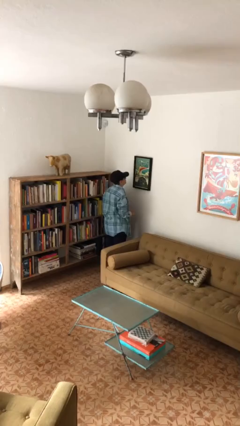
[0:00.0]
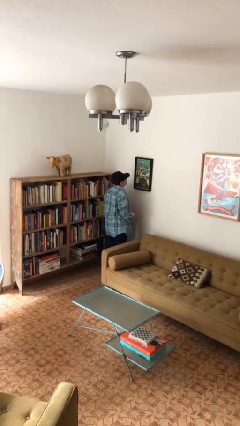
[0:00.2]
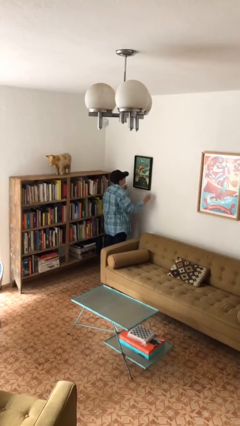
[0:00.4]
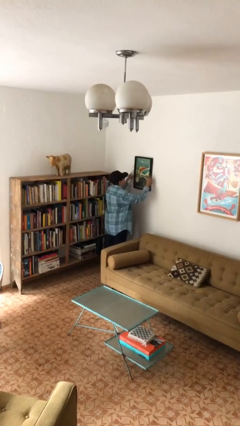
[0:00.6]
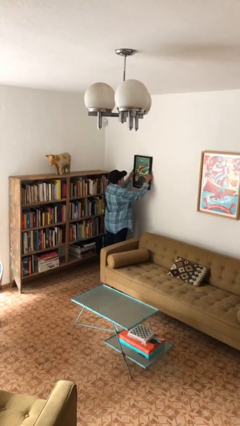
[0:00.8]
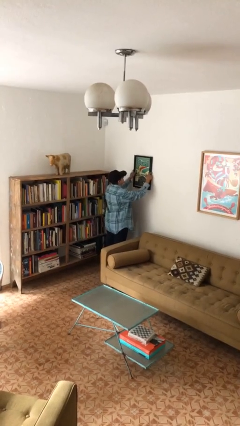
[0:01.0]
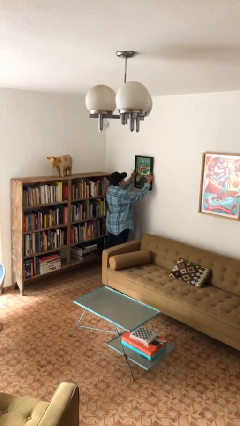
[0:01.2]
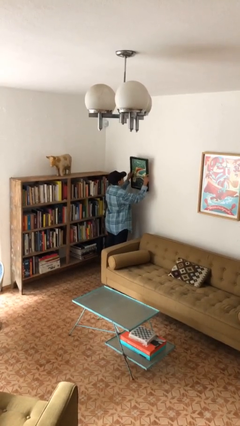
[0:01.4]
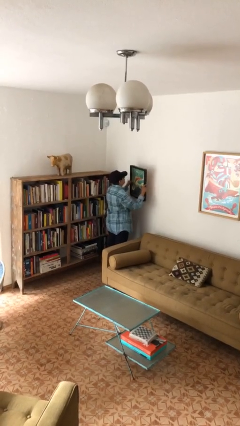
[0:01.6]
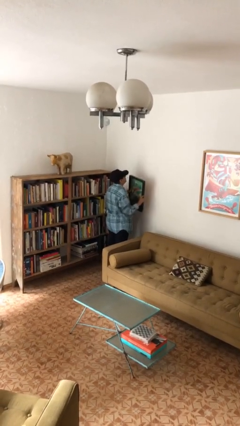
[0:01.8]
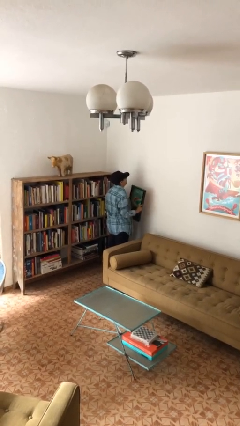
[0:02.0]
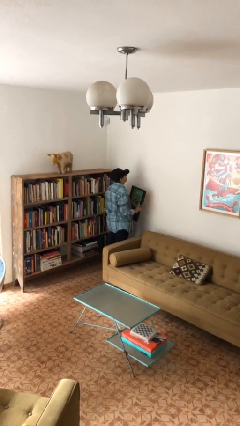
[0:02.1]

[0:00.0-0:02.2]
person takes down picture frame

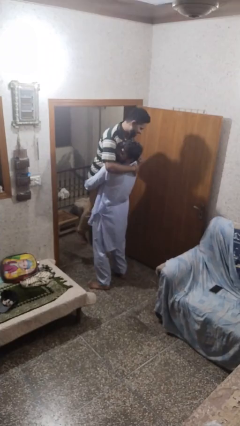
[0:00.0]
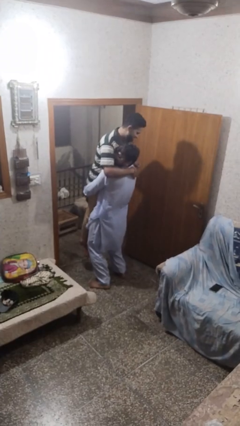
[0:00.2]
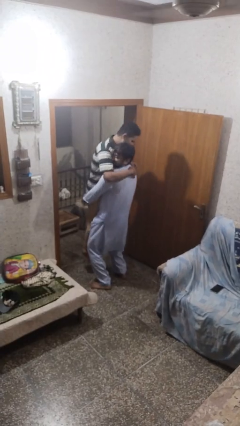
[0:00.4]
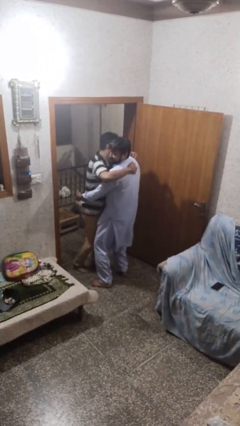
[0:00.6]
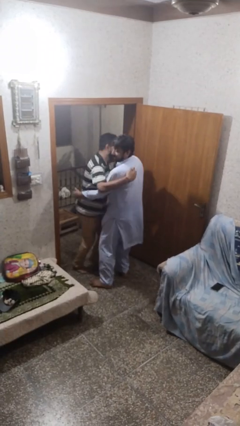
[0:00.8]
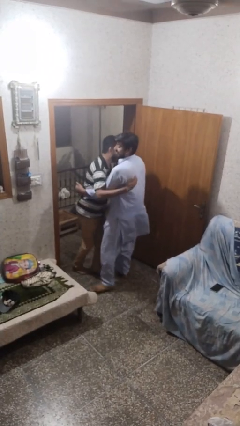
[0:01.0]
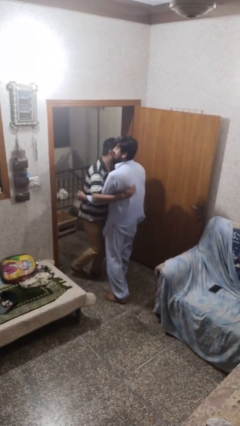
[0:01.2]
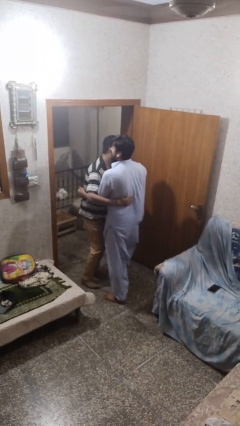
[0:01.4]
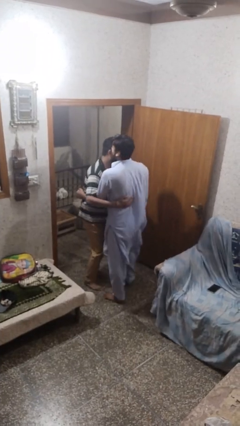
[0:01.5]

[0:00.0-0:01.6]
person puts down person

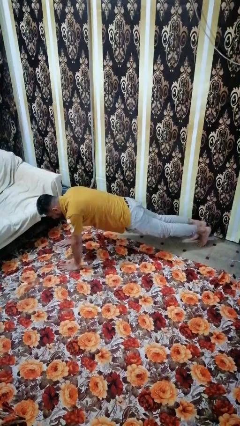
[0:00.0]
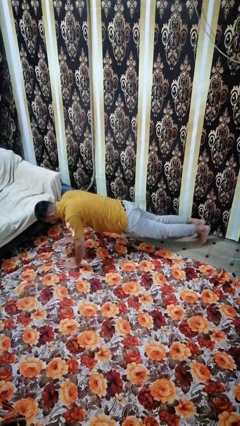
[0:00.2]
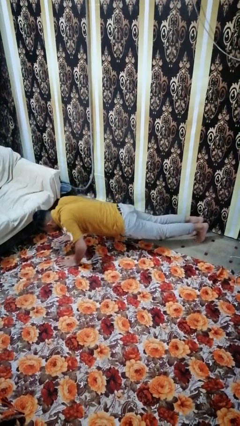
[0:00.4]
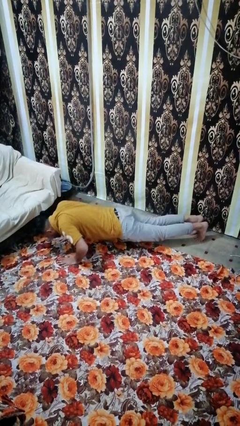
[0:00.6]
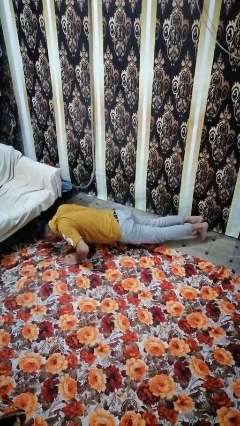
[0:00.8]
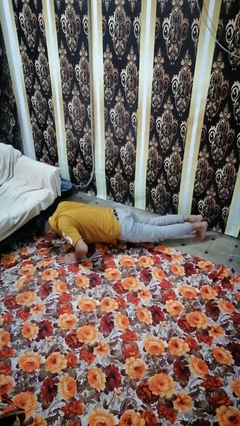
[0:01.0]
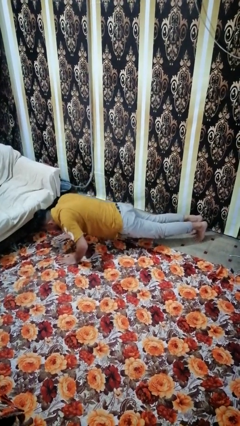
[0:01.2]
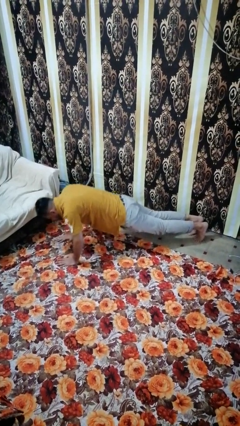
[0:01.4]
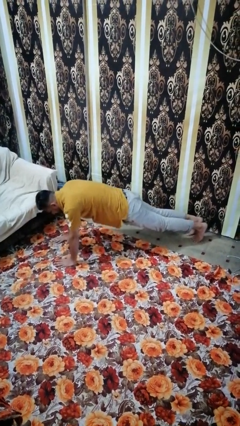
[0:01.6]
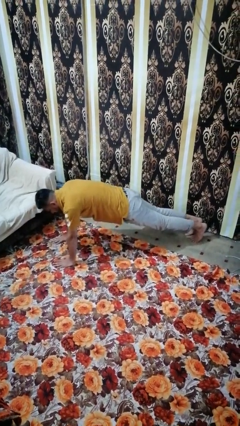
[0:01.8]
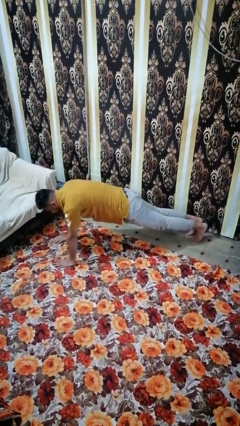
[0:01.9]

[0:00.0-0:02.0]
person exercises with pushup

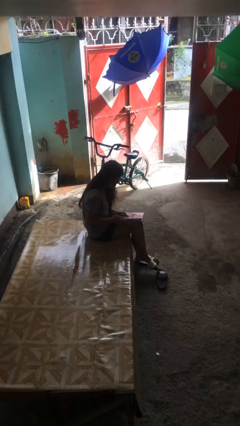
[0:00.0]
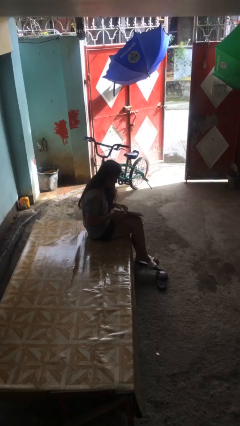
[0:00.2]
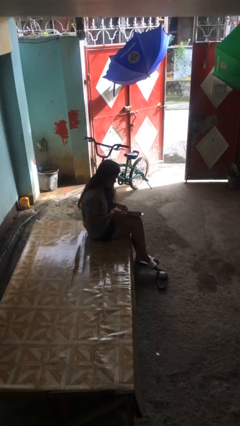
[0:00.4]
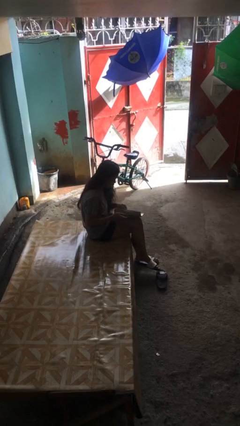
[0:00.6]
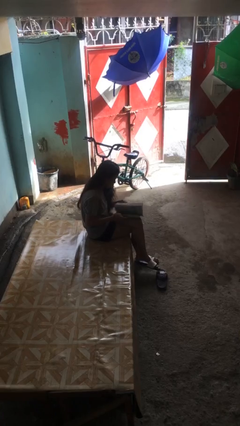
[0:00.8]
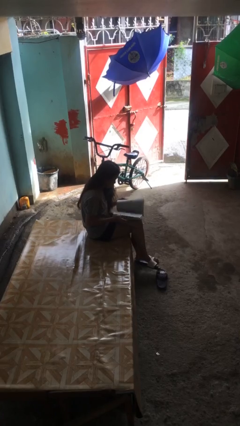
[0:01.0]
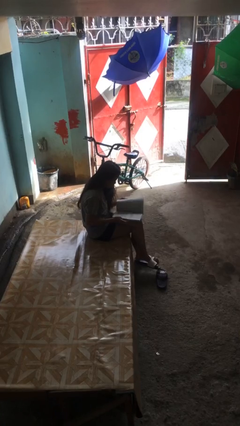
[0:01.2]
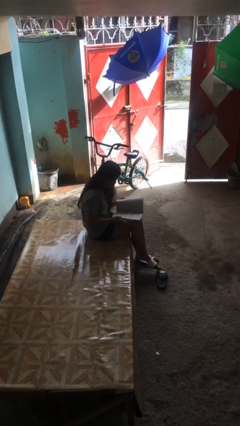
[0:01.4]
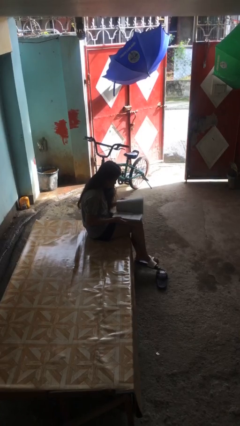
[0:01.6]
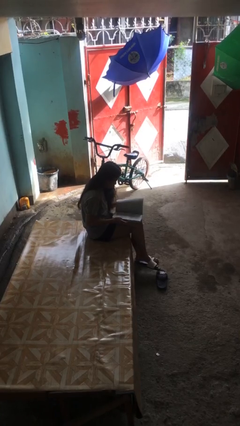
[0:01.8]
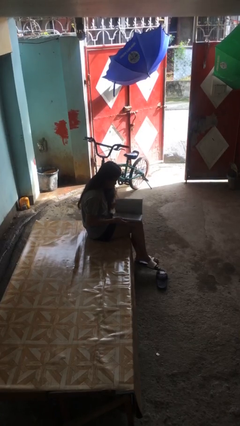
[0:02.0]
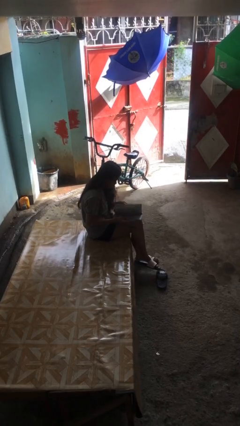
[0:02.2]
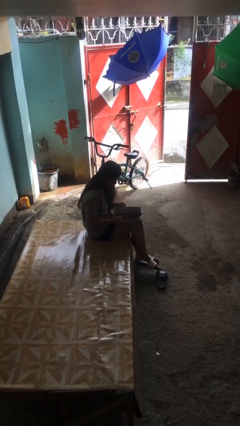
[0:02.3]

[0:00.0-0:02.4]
person reads document

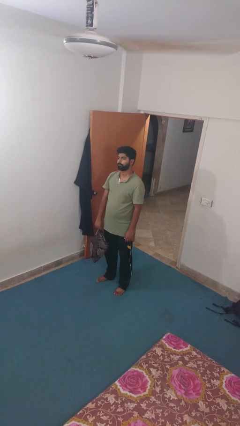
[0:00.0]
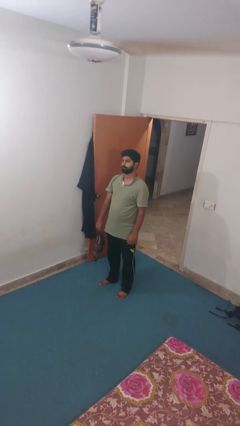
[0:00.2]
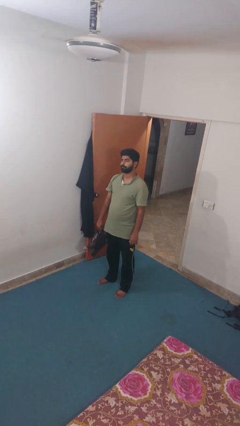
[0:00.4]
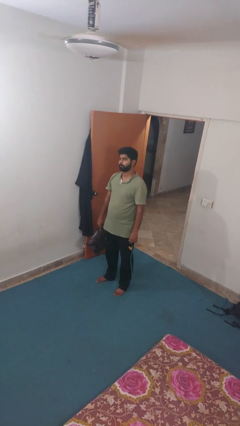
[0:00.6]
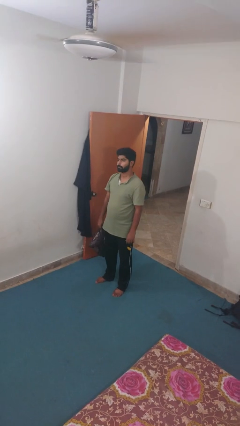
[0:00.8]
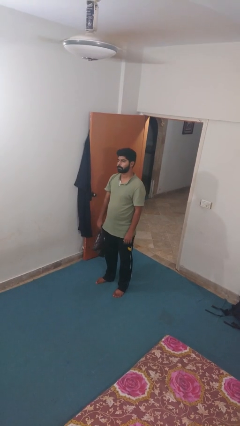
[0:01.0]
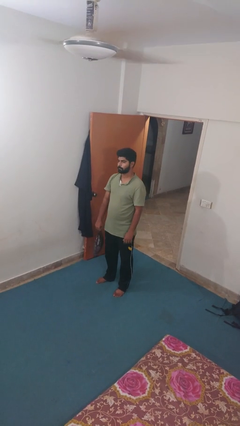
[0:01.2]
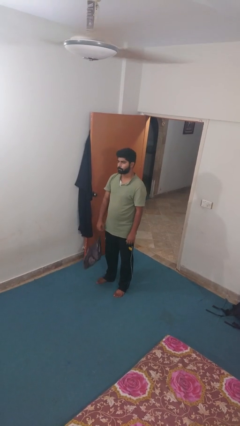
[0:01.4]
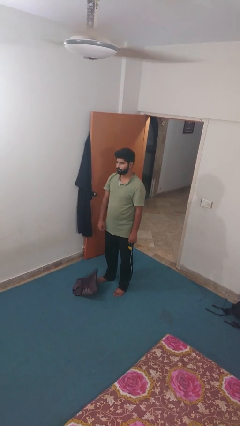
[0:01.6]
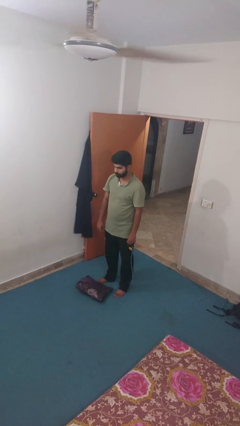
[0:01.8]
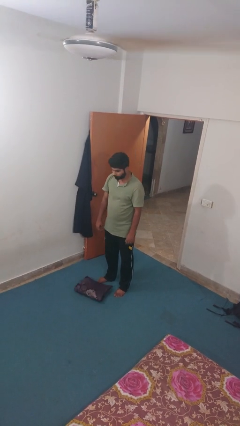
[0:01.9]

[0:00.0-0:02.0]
person drops object

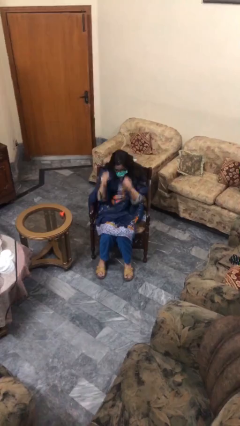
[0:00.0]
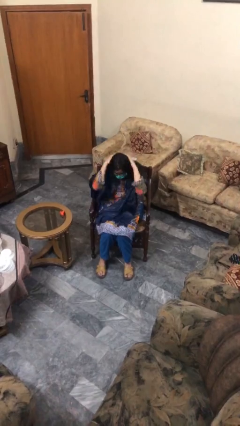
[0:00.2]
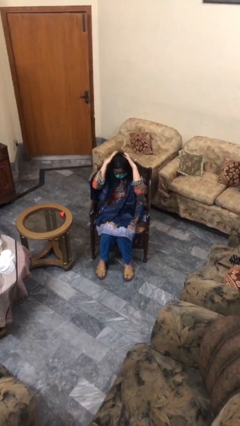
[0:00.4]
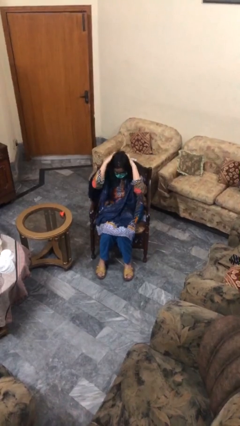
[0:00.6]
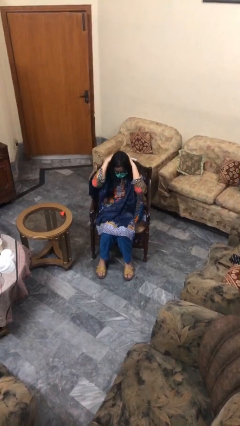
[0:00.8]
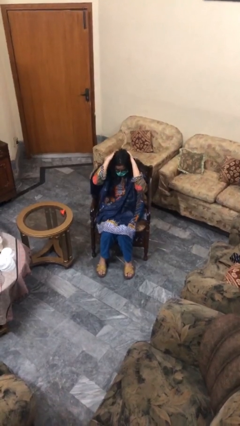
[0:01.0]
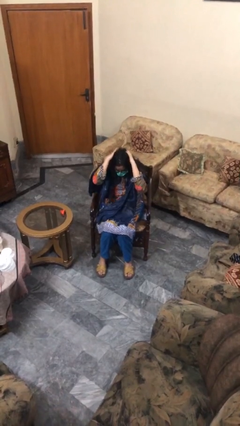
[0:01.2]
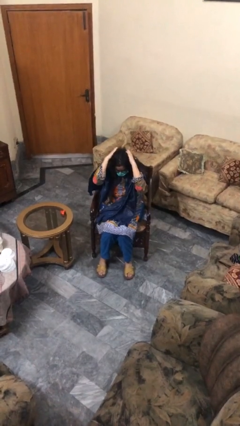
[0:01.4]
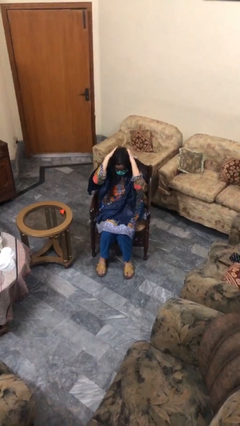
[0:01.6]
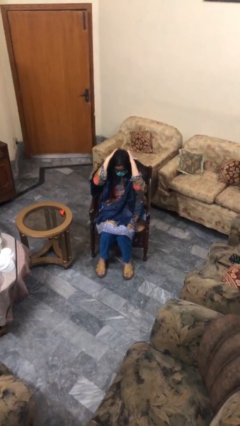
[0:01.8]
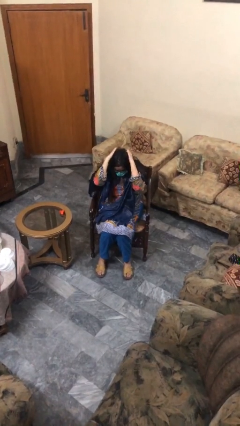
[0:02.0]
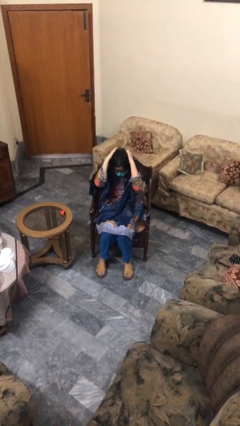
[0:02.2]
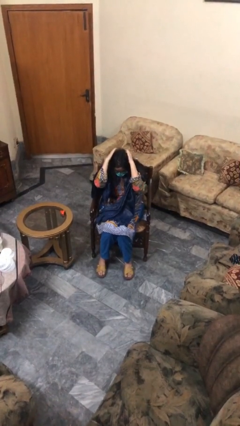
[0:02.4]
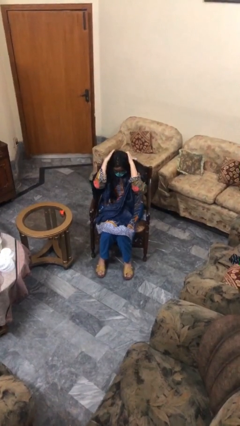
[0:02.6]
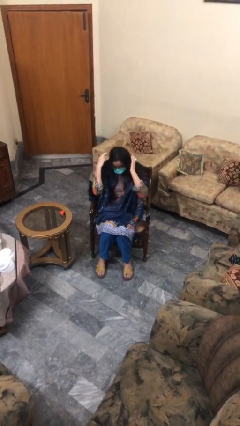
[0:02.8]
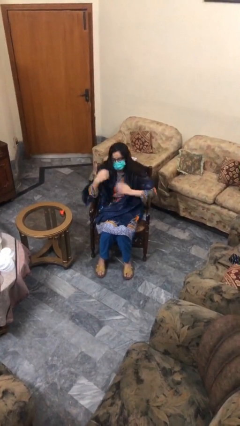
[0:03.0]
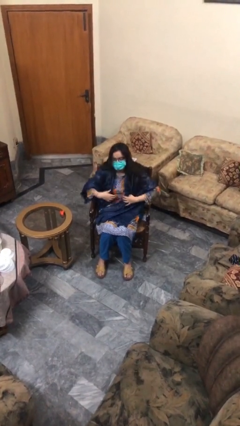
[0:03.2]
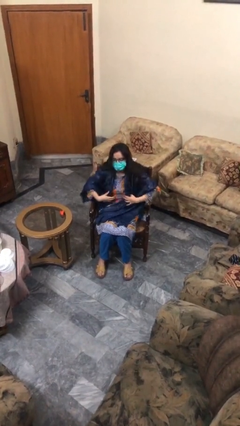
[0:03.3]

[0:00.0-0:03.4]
person pats head

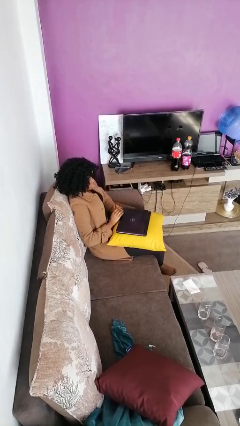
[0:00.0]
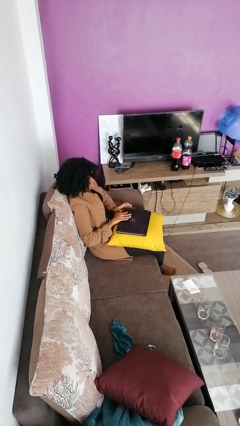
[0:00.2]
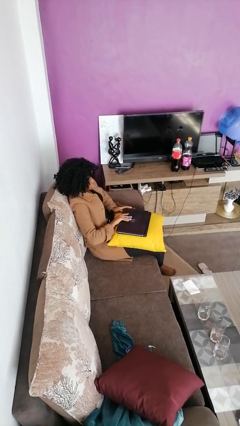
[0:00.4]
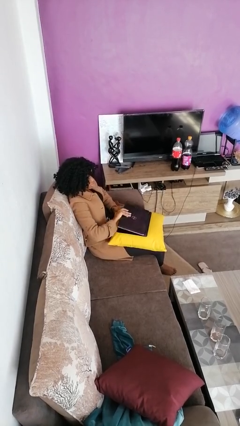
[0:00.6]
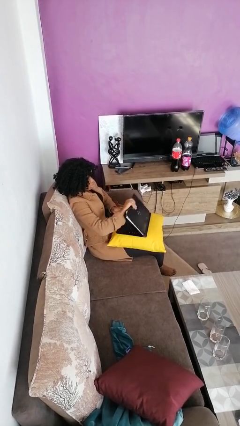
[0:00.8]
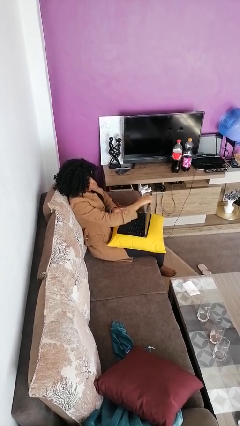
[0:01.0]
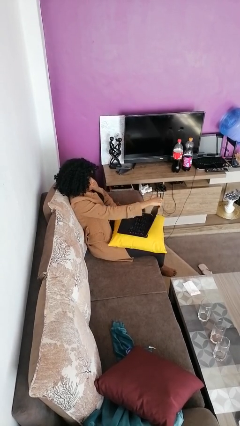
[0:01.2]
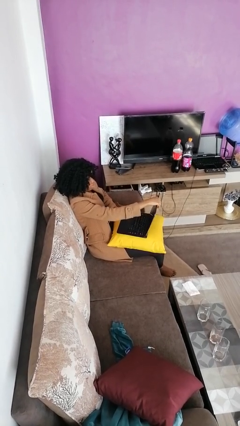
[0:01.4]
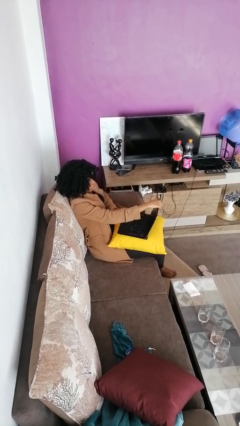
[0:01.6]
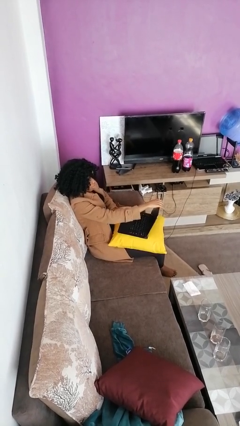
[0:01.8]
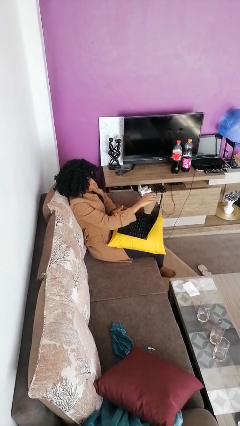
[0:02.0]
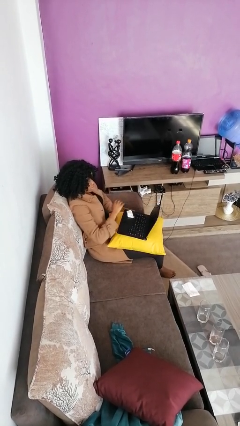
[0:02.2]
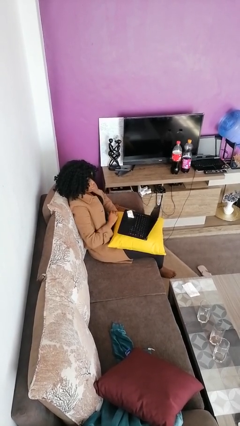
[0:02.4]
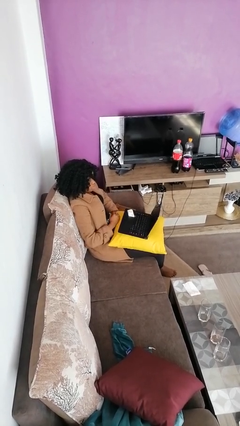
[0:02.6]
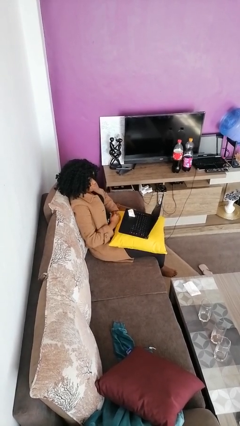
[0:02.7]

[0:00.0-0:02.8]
person opens laptop

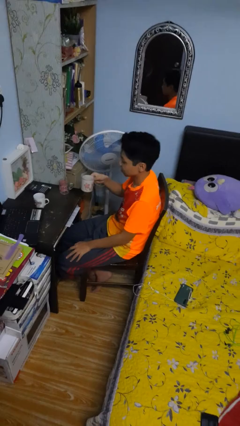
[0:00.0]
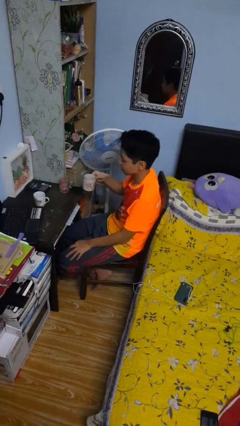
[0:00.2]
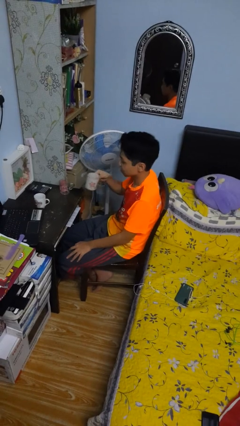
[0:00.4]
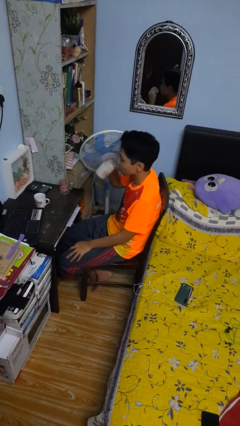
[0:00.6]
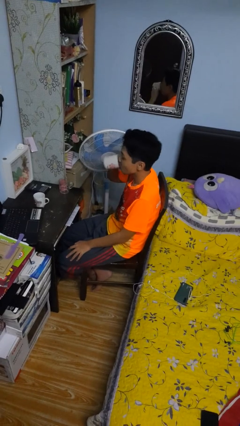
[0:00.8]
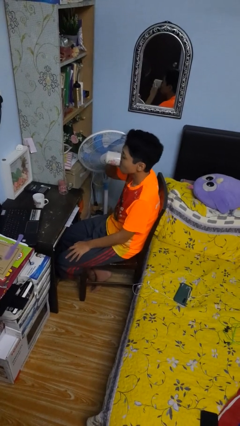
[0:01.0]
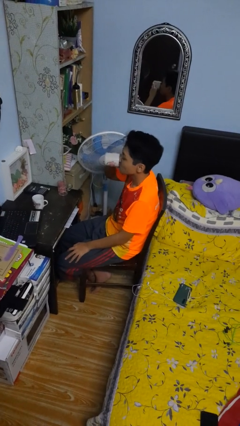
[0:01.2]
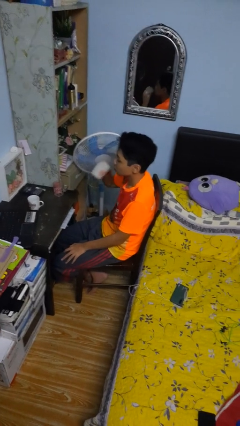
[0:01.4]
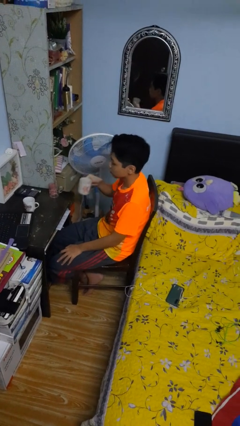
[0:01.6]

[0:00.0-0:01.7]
person drinks from shotglass
